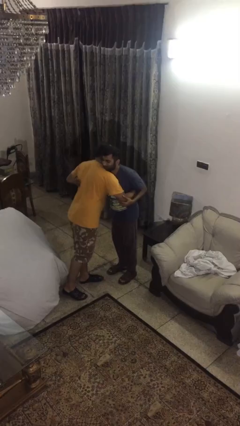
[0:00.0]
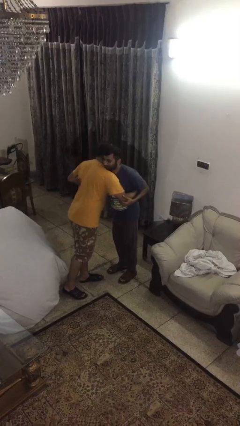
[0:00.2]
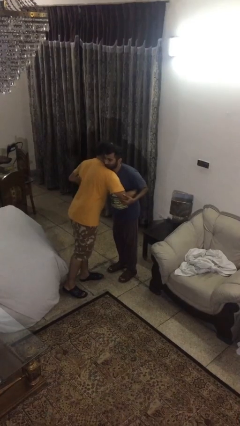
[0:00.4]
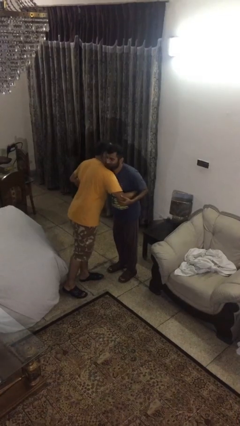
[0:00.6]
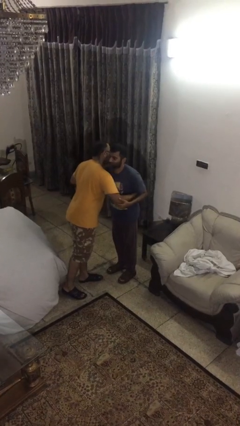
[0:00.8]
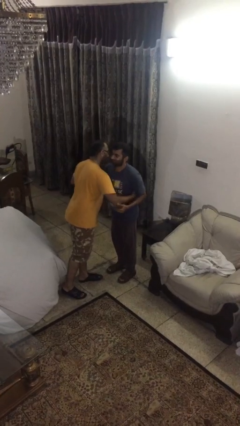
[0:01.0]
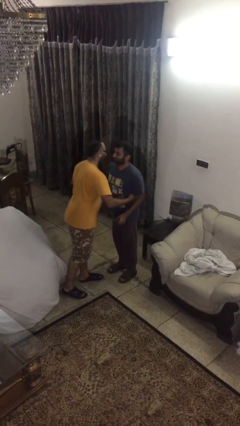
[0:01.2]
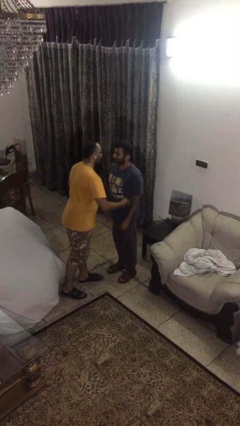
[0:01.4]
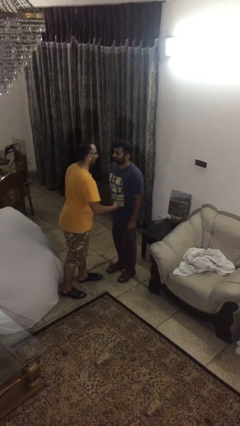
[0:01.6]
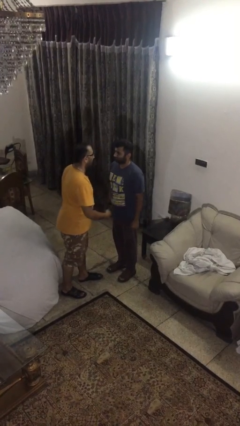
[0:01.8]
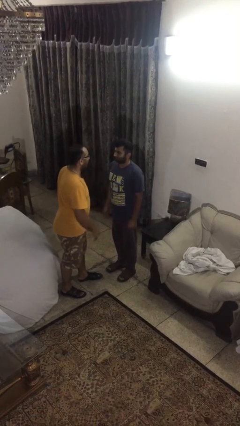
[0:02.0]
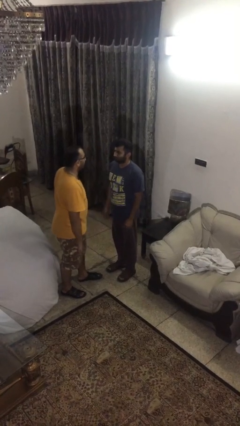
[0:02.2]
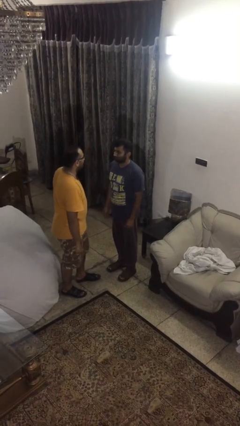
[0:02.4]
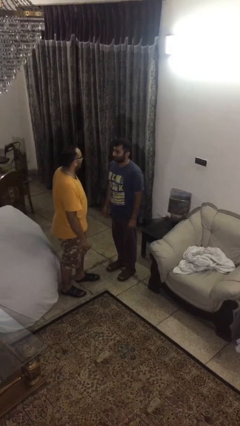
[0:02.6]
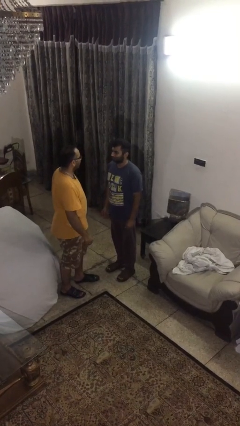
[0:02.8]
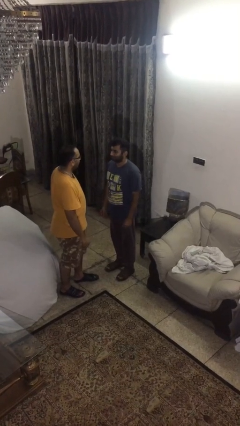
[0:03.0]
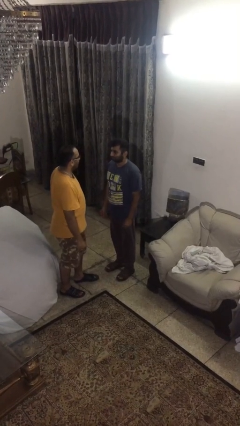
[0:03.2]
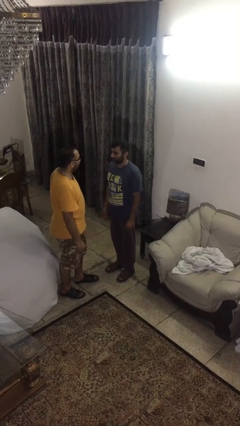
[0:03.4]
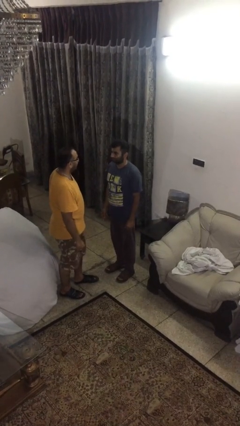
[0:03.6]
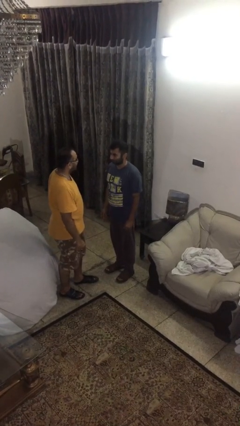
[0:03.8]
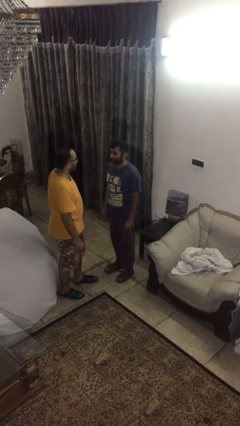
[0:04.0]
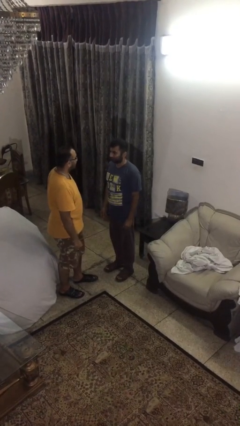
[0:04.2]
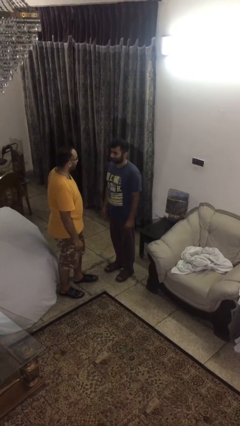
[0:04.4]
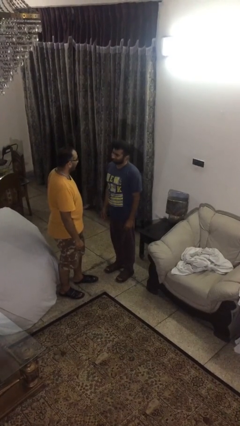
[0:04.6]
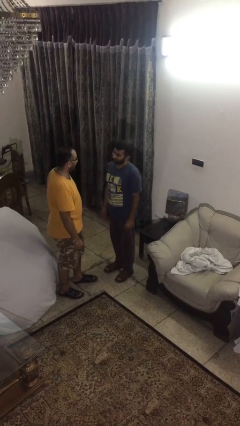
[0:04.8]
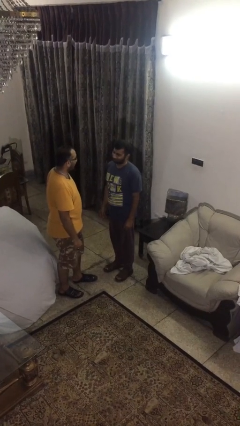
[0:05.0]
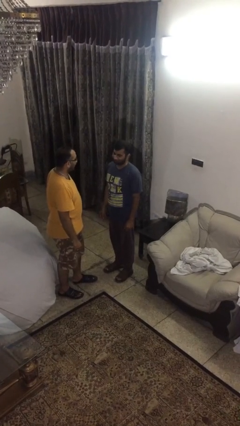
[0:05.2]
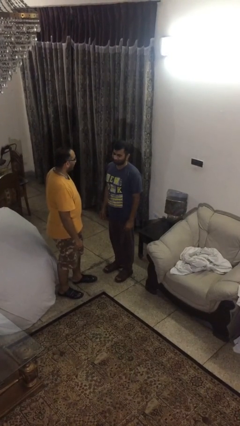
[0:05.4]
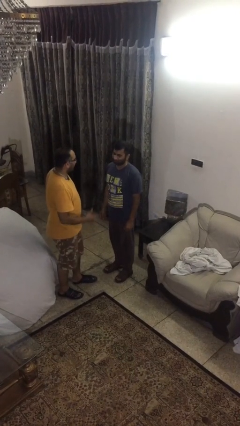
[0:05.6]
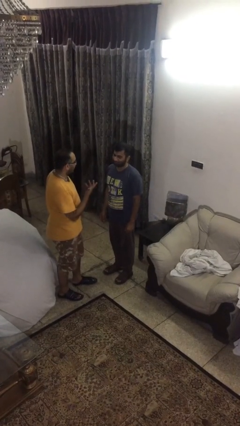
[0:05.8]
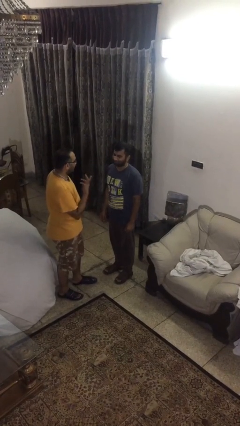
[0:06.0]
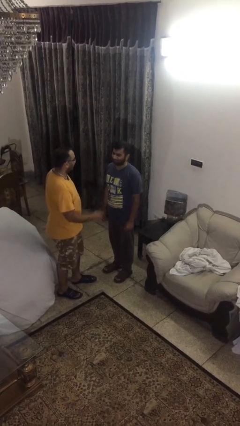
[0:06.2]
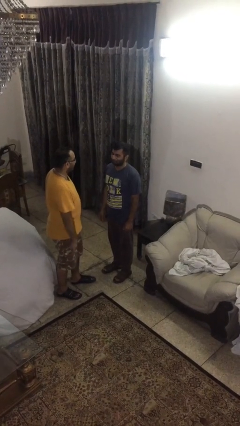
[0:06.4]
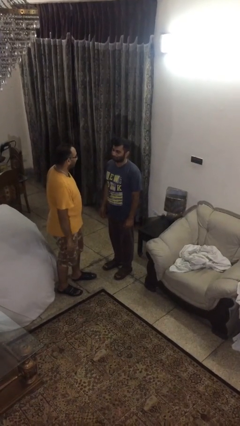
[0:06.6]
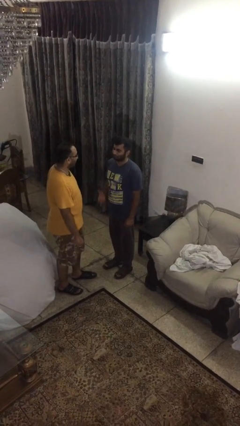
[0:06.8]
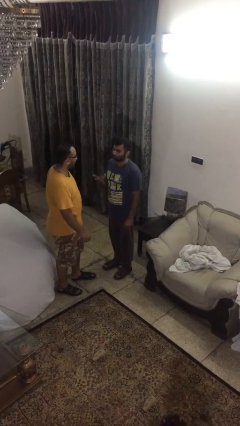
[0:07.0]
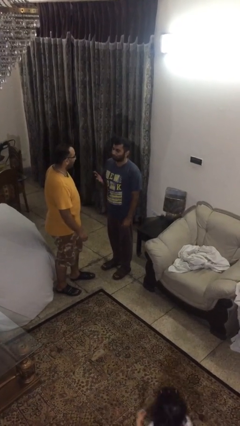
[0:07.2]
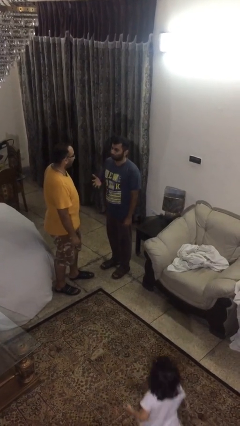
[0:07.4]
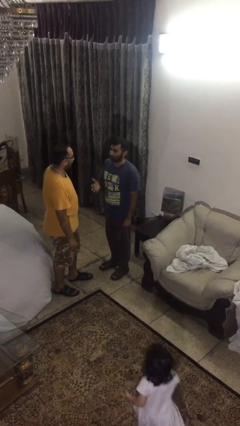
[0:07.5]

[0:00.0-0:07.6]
person talks to person

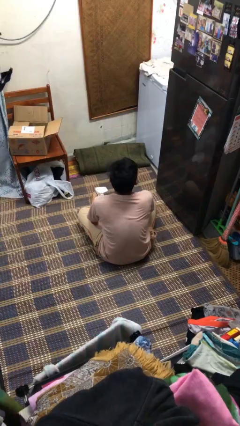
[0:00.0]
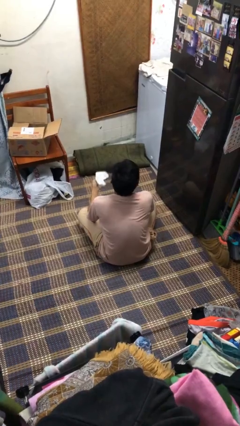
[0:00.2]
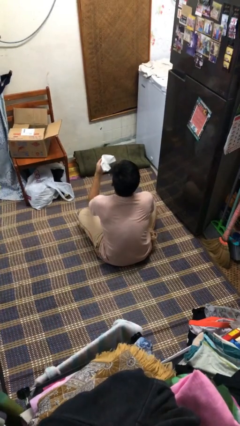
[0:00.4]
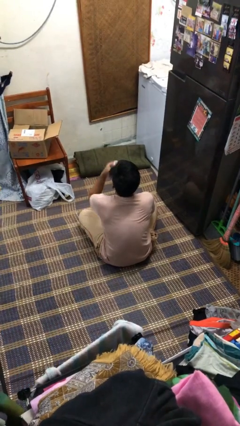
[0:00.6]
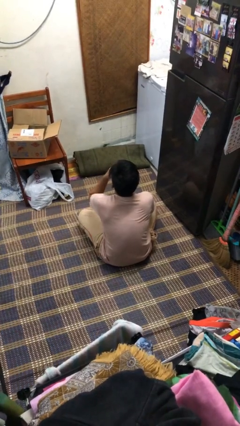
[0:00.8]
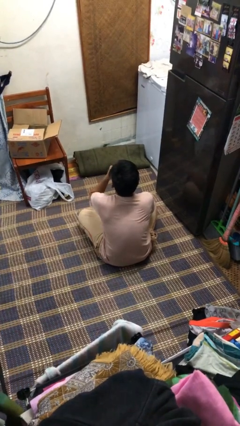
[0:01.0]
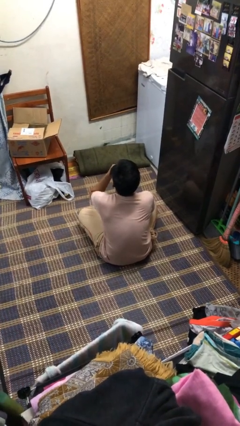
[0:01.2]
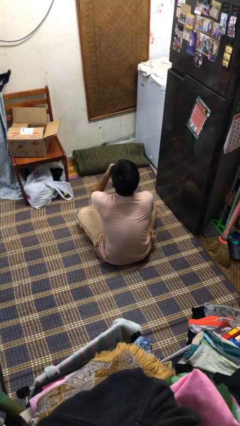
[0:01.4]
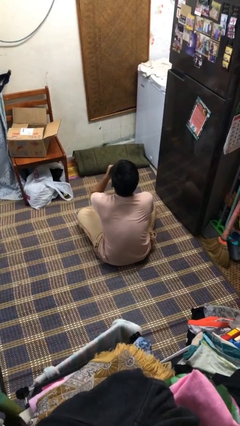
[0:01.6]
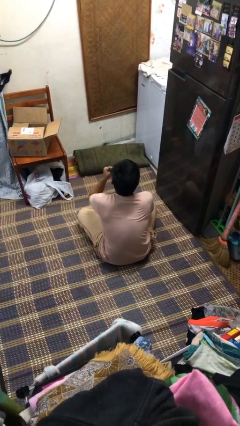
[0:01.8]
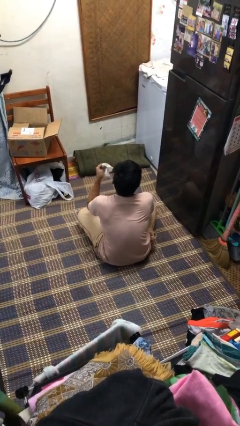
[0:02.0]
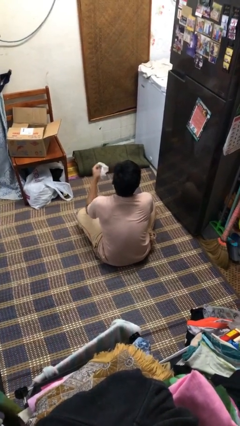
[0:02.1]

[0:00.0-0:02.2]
person blows nose

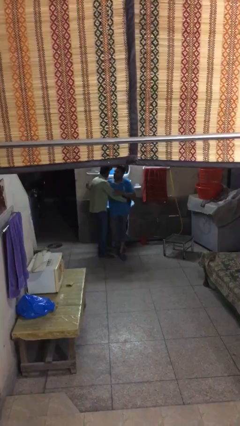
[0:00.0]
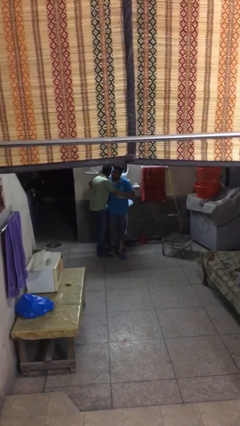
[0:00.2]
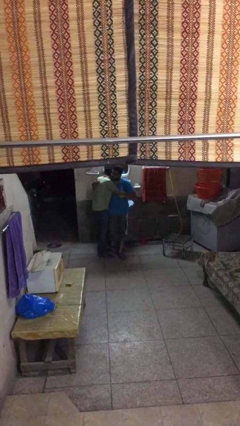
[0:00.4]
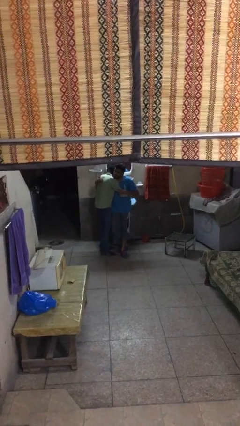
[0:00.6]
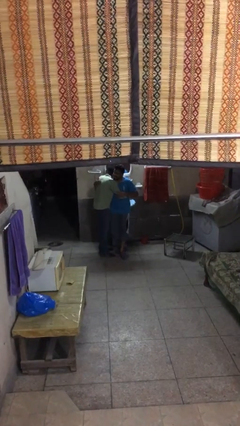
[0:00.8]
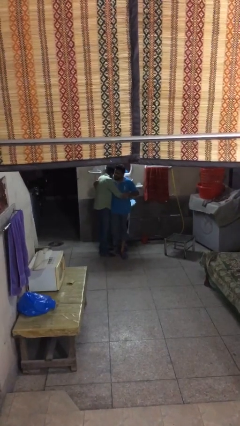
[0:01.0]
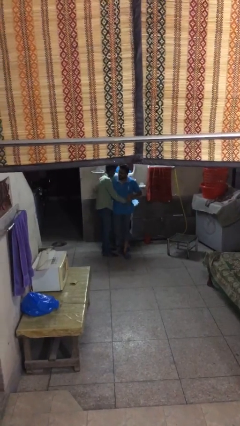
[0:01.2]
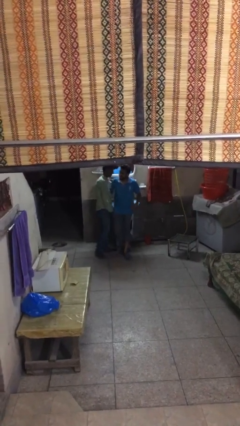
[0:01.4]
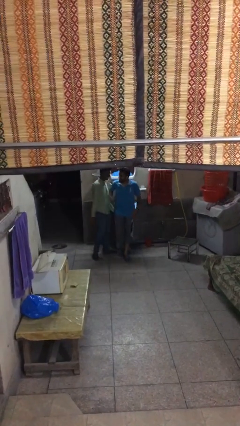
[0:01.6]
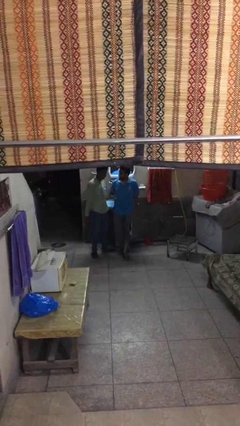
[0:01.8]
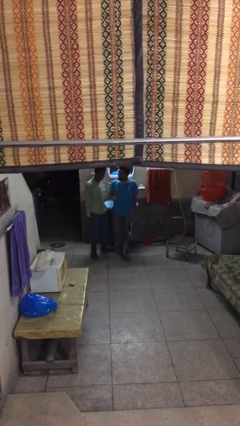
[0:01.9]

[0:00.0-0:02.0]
person embraces person

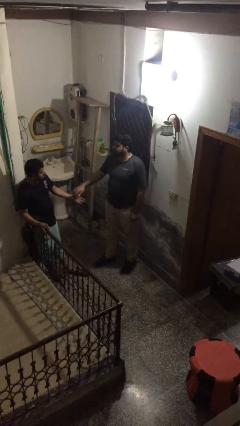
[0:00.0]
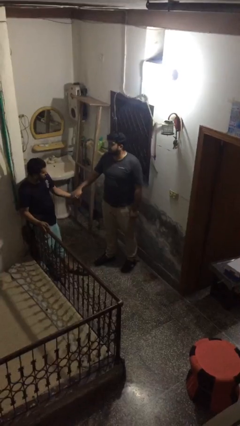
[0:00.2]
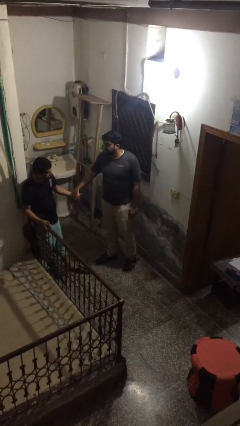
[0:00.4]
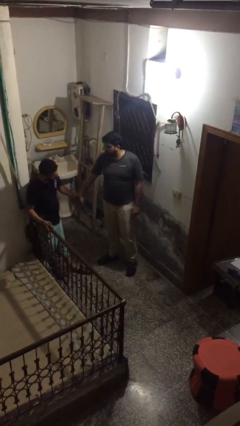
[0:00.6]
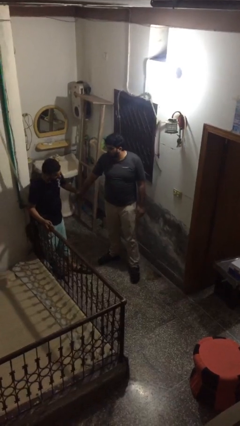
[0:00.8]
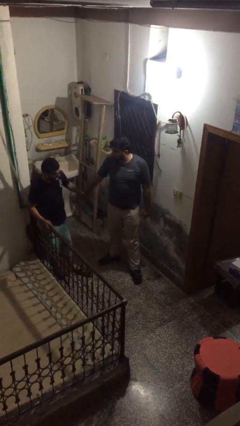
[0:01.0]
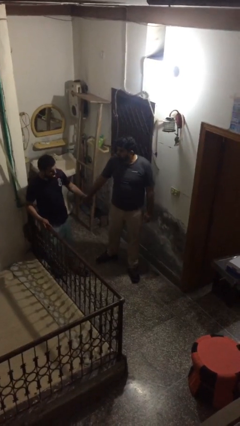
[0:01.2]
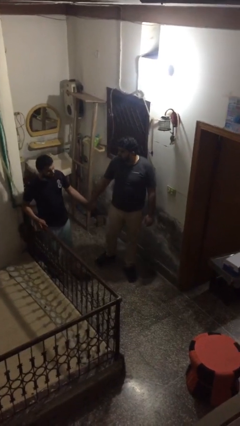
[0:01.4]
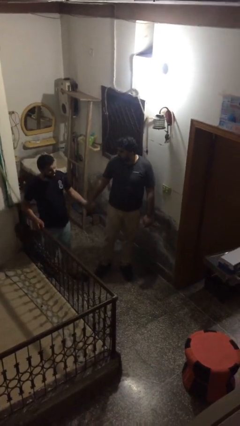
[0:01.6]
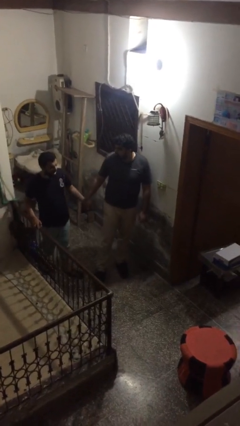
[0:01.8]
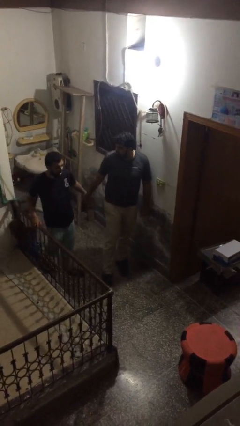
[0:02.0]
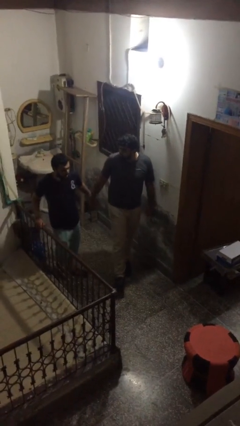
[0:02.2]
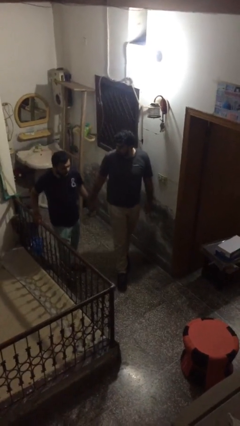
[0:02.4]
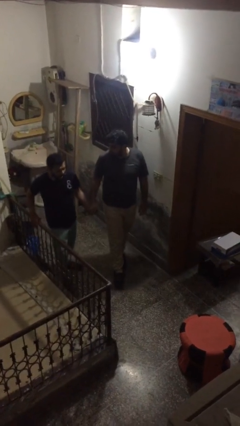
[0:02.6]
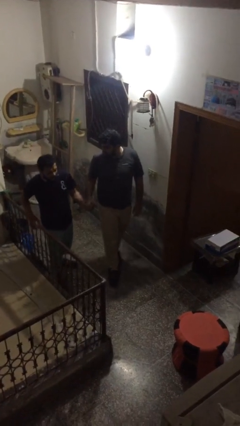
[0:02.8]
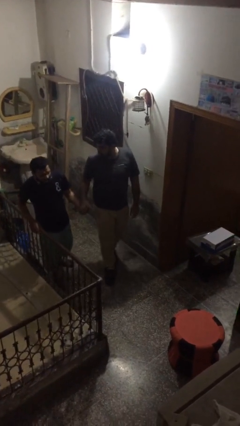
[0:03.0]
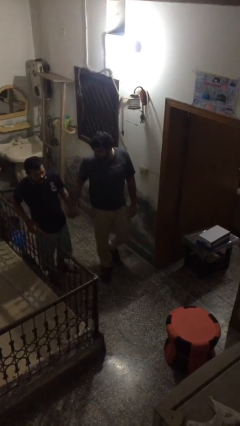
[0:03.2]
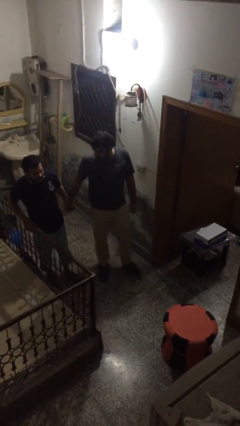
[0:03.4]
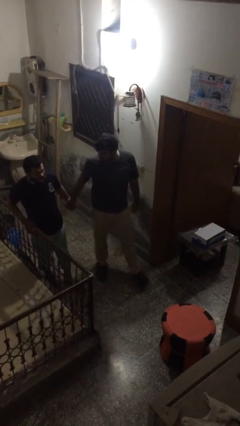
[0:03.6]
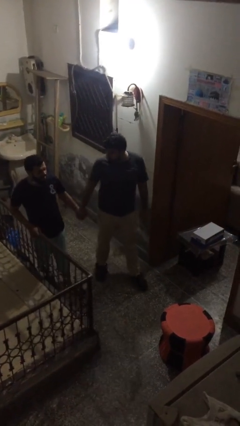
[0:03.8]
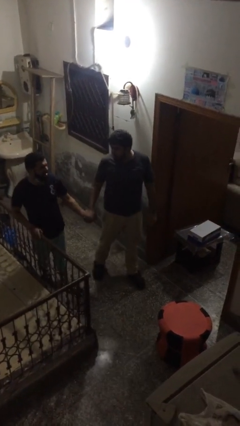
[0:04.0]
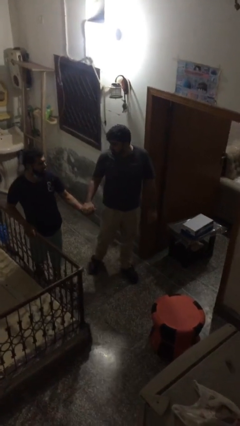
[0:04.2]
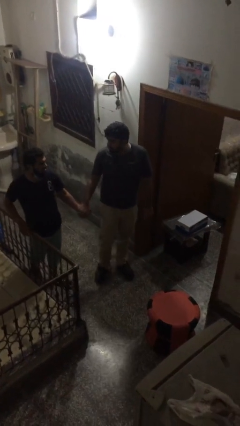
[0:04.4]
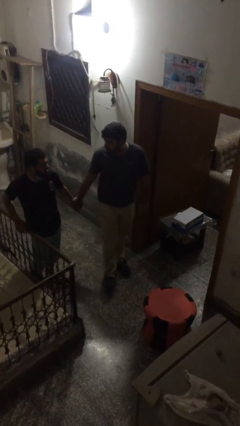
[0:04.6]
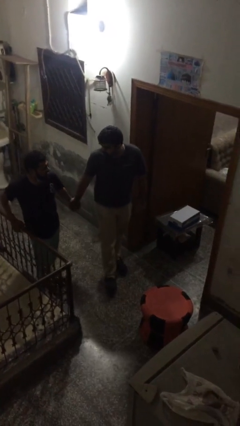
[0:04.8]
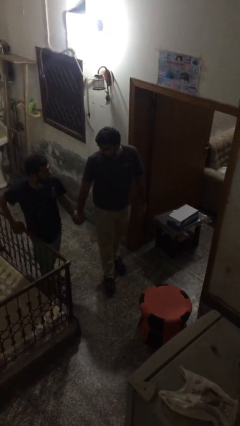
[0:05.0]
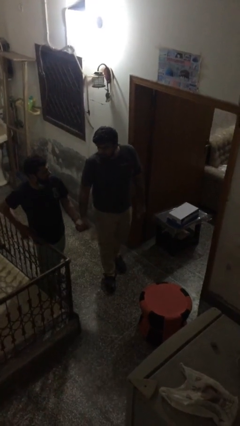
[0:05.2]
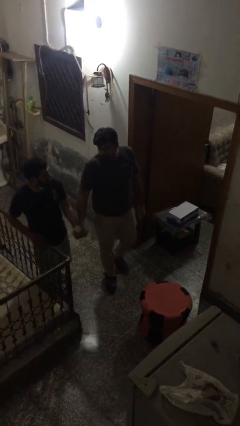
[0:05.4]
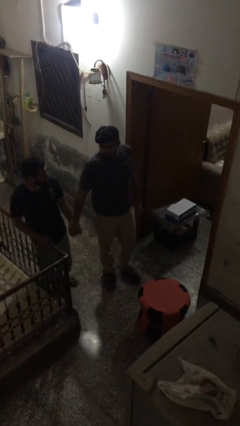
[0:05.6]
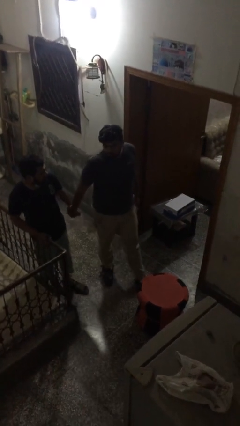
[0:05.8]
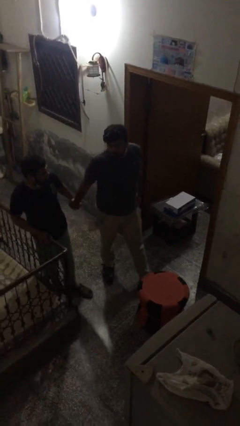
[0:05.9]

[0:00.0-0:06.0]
person holds hand
